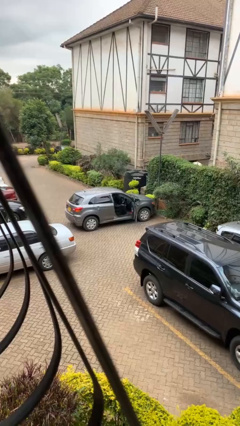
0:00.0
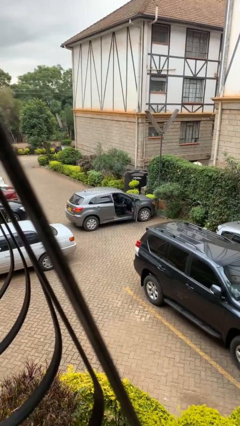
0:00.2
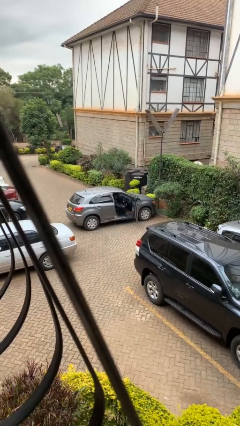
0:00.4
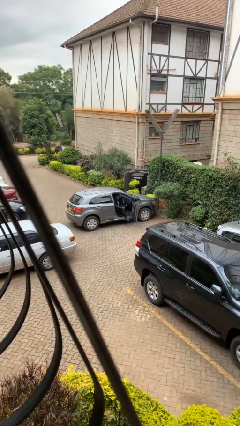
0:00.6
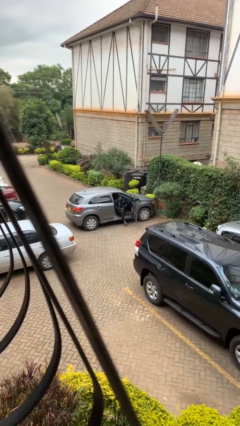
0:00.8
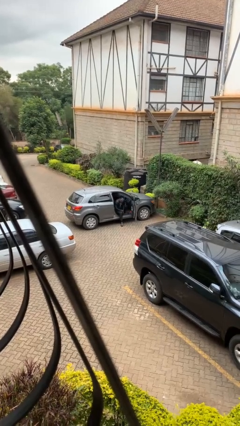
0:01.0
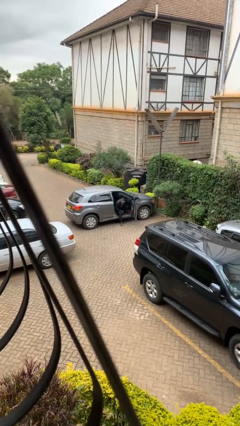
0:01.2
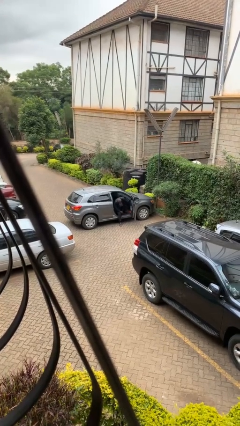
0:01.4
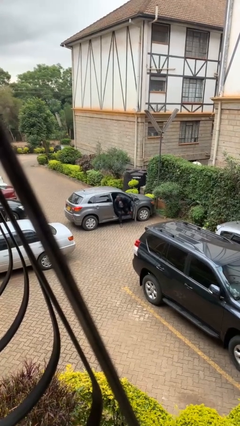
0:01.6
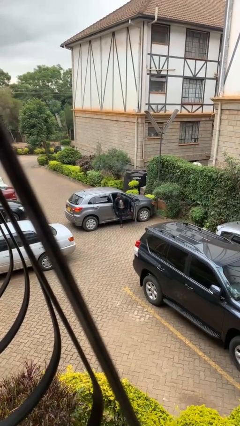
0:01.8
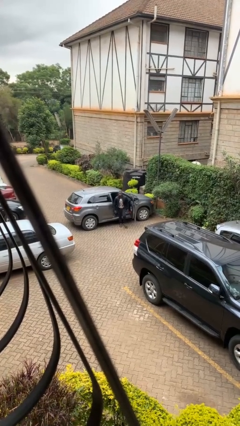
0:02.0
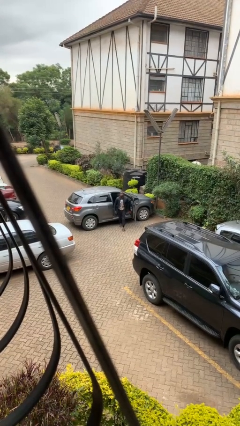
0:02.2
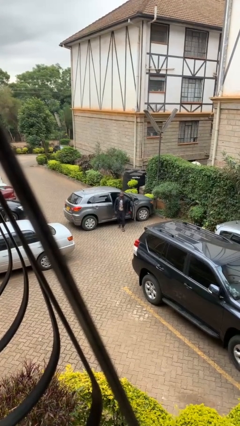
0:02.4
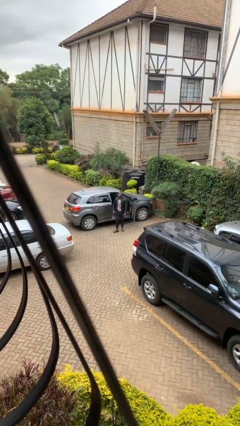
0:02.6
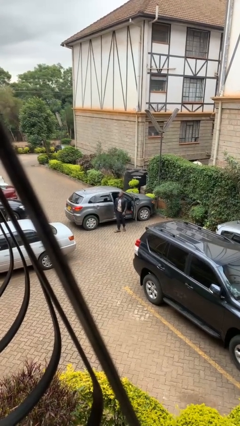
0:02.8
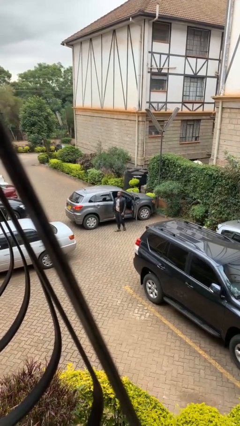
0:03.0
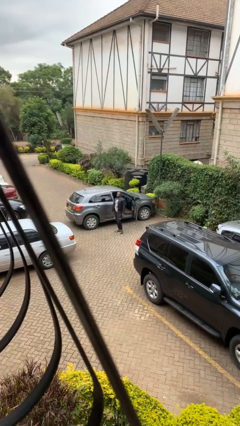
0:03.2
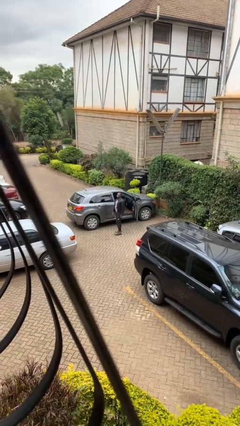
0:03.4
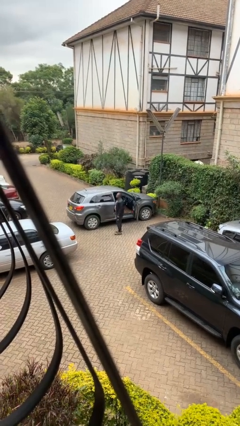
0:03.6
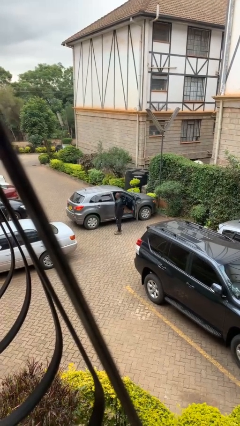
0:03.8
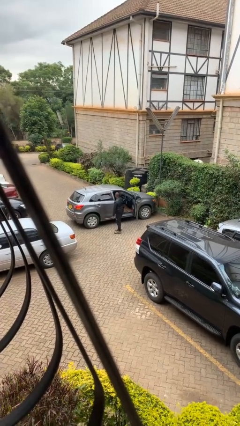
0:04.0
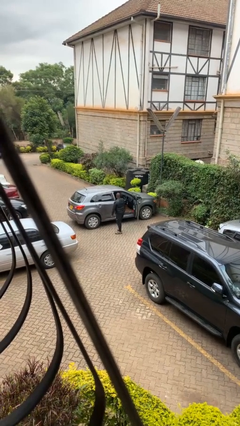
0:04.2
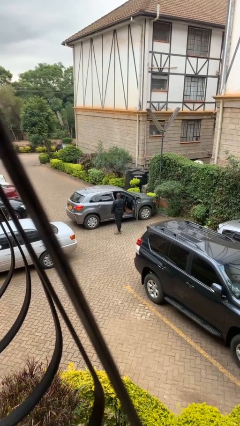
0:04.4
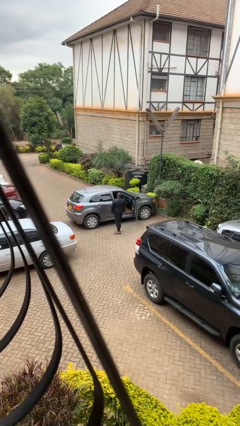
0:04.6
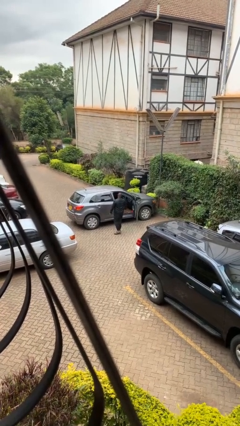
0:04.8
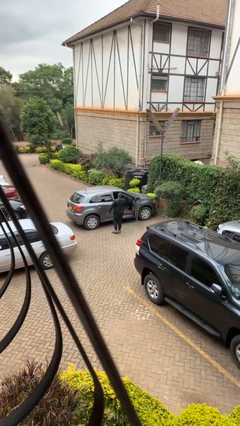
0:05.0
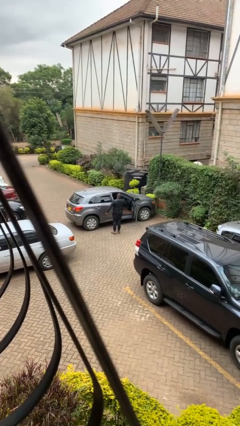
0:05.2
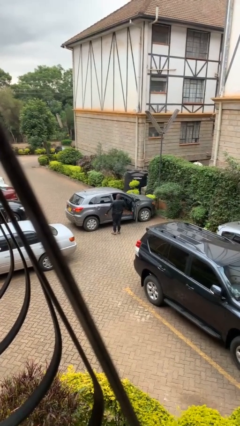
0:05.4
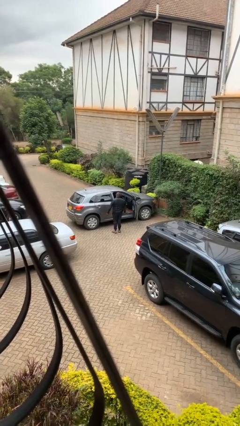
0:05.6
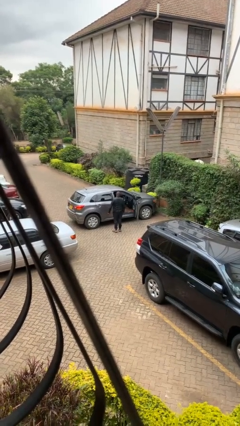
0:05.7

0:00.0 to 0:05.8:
person exits car

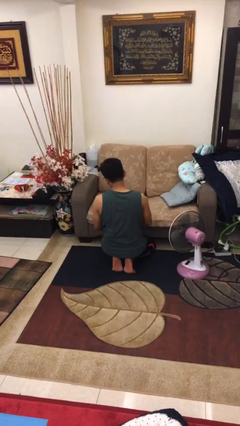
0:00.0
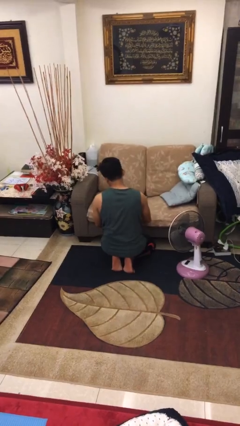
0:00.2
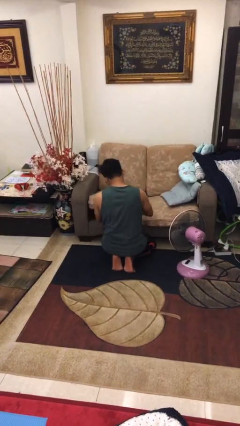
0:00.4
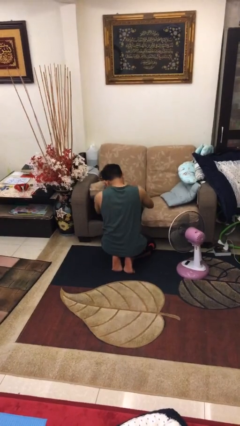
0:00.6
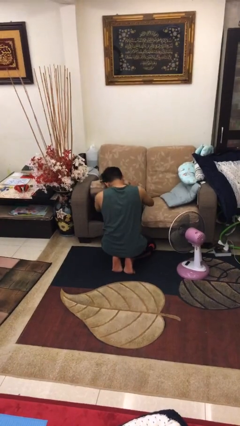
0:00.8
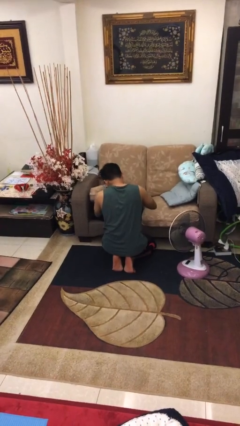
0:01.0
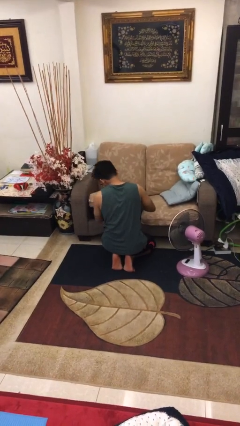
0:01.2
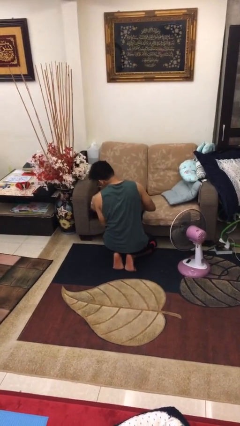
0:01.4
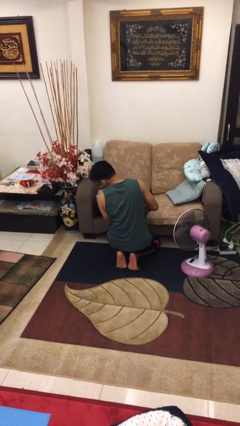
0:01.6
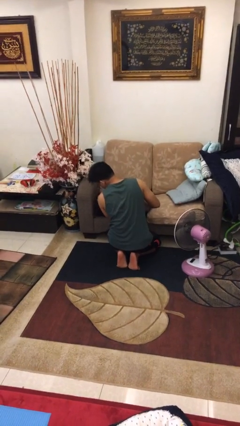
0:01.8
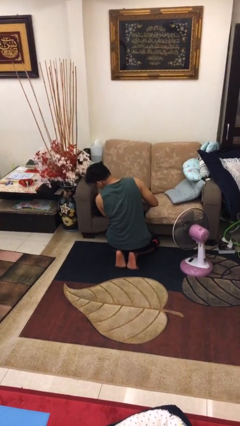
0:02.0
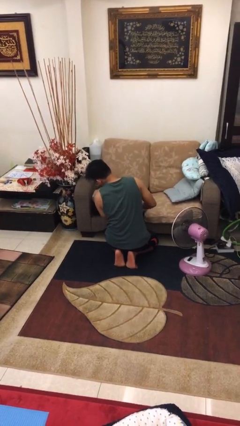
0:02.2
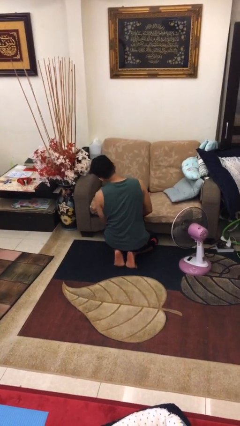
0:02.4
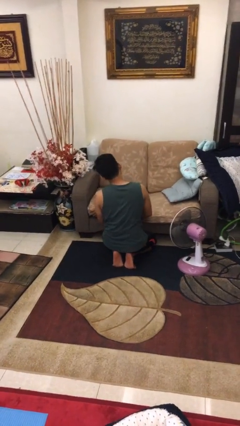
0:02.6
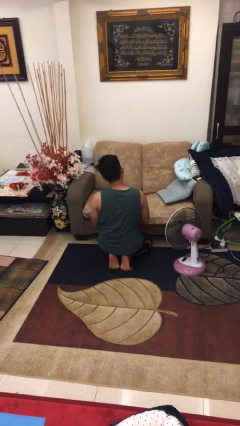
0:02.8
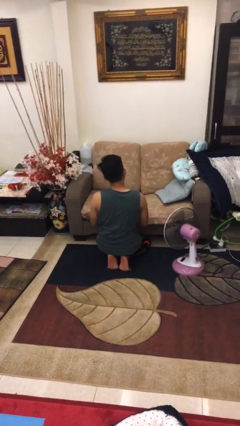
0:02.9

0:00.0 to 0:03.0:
person searches in couch

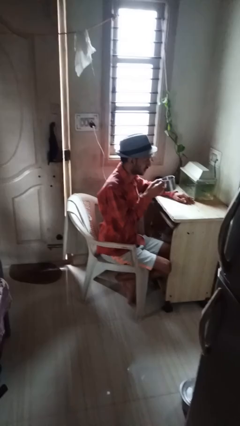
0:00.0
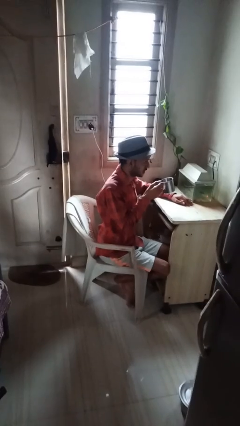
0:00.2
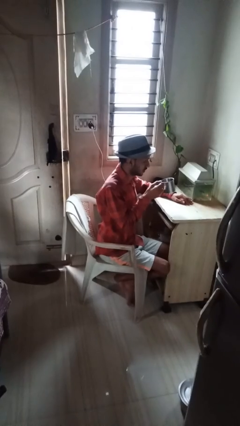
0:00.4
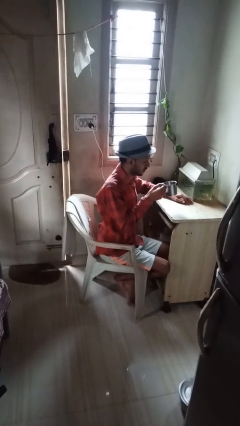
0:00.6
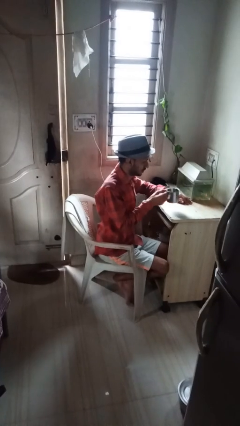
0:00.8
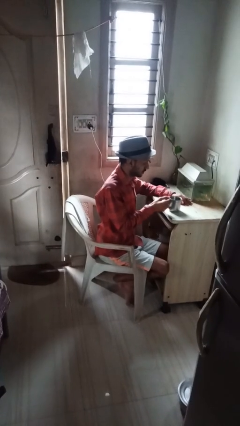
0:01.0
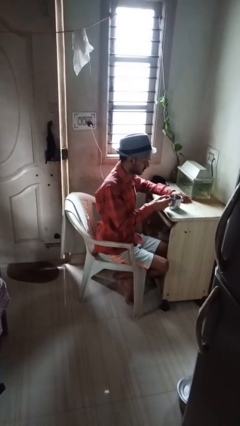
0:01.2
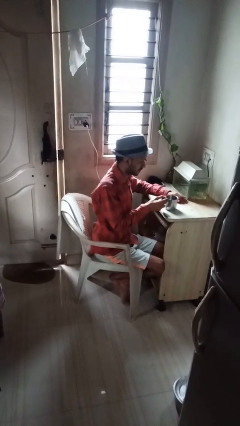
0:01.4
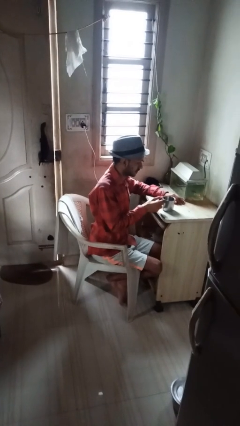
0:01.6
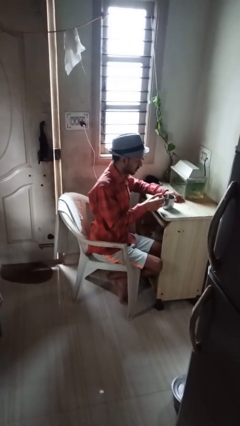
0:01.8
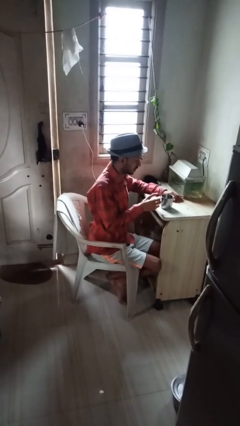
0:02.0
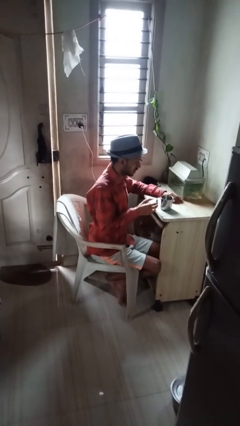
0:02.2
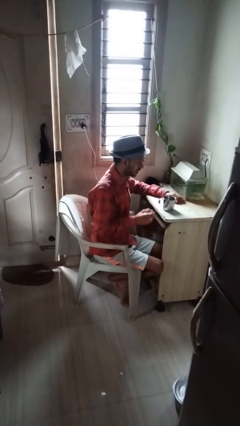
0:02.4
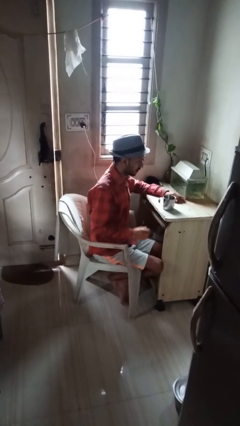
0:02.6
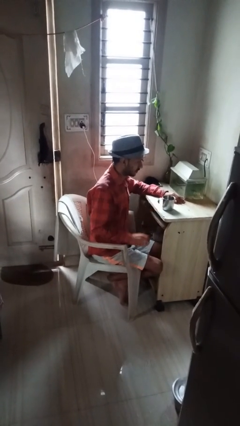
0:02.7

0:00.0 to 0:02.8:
person puts down object on table

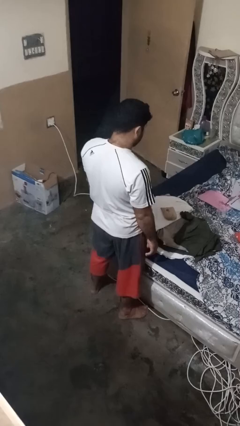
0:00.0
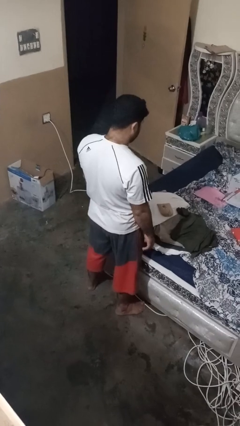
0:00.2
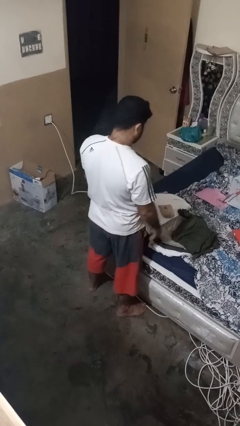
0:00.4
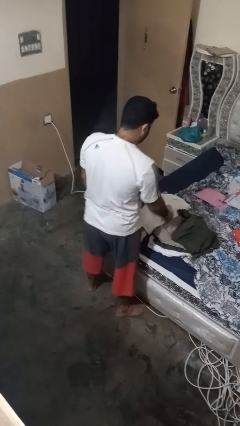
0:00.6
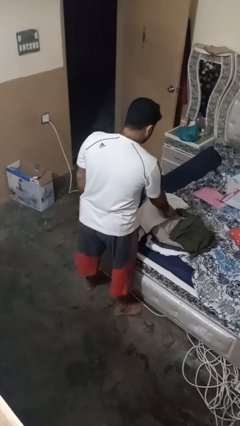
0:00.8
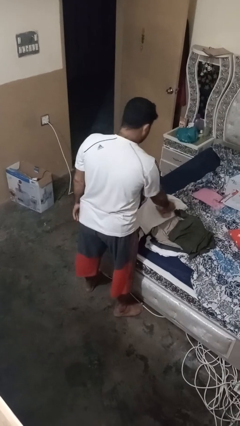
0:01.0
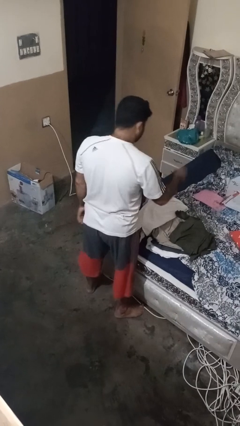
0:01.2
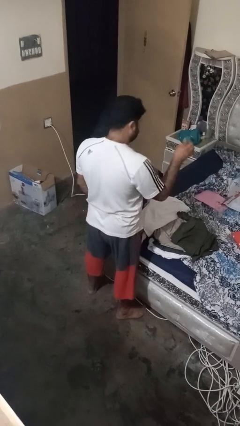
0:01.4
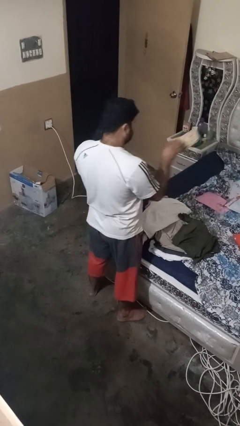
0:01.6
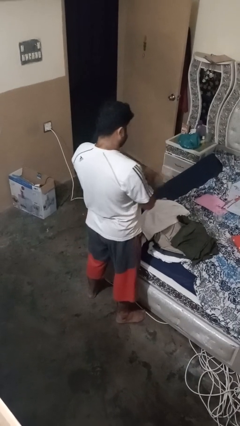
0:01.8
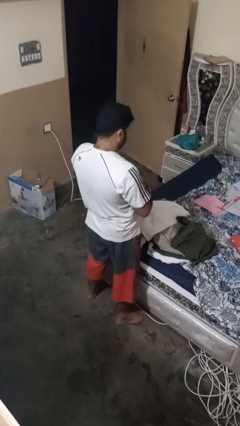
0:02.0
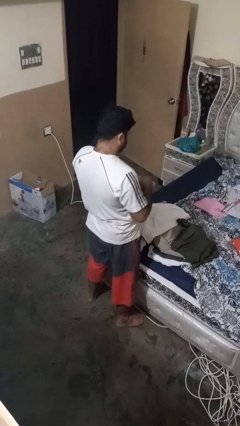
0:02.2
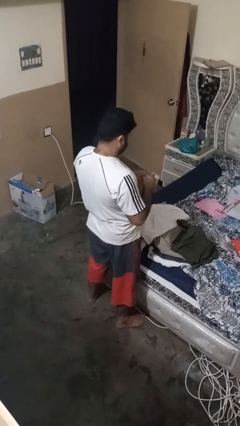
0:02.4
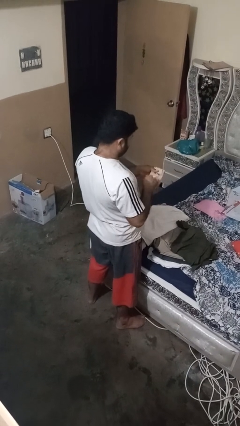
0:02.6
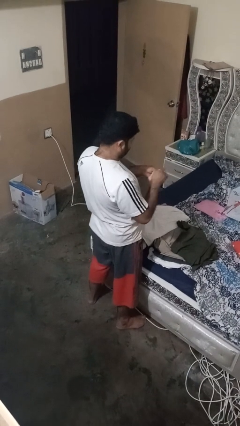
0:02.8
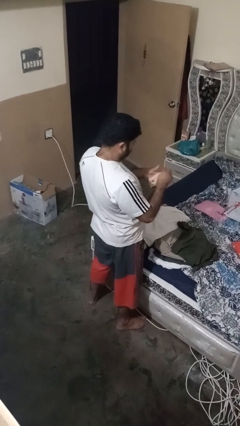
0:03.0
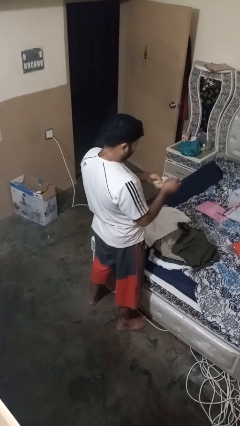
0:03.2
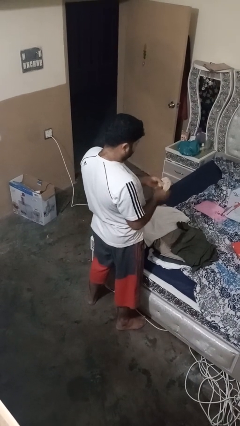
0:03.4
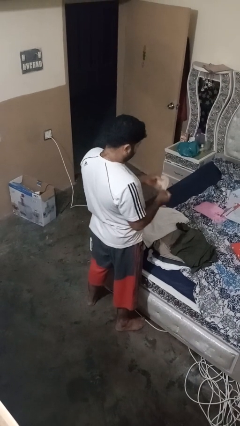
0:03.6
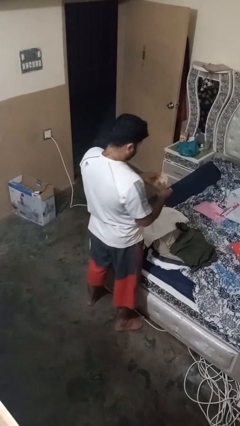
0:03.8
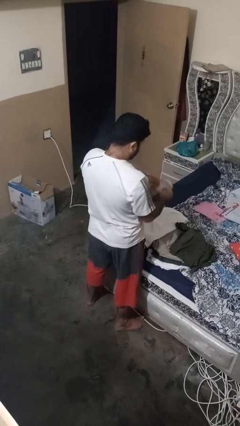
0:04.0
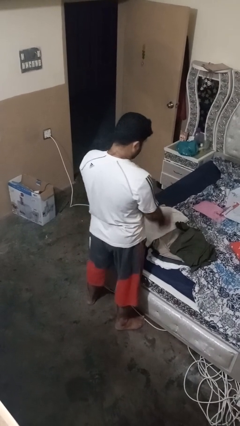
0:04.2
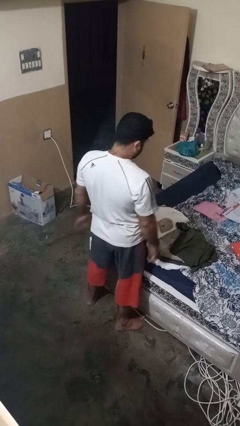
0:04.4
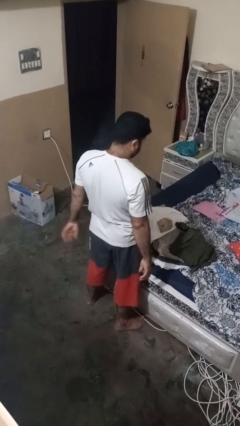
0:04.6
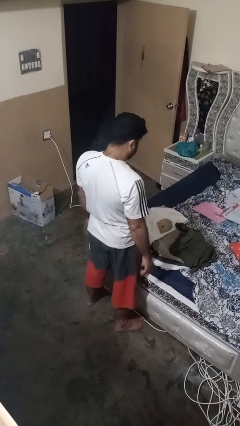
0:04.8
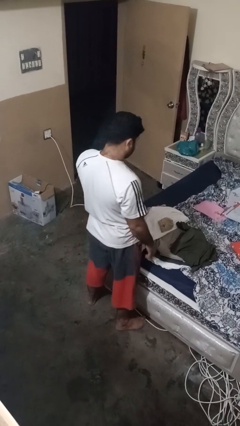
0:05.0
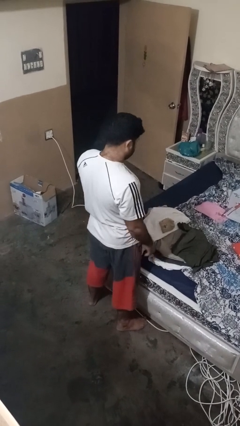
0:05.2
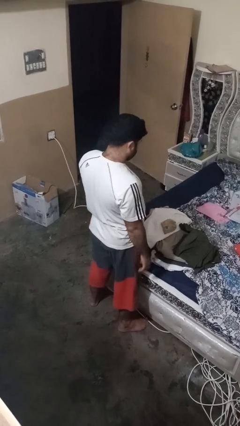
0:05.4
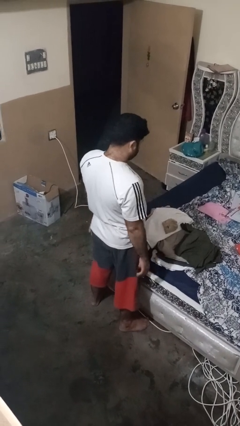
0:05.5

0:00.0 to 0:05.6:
person folds socks

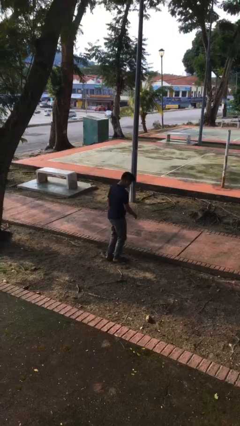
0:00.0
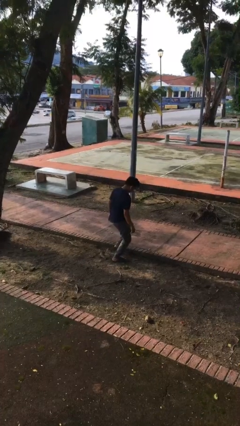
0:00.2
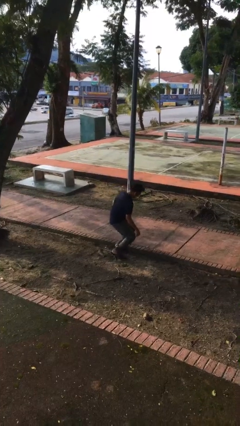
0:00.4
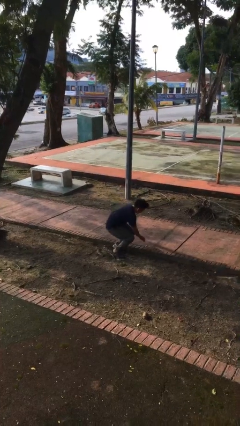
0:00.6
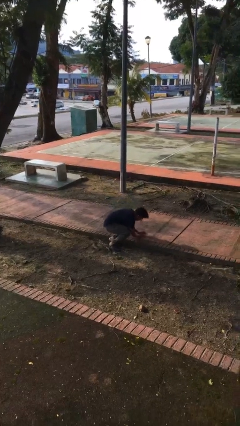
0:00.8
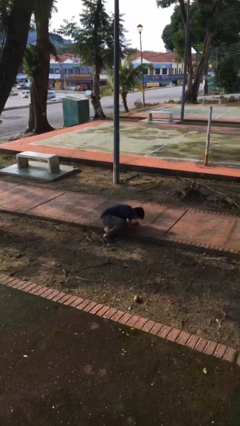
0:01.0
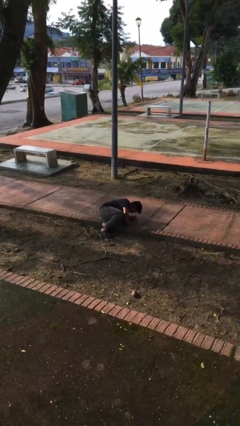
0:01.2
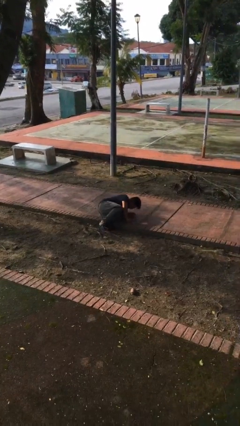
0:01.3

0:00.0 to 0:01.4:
person trips on object on floor
